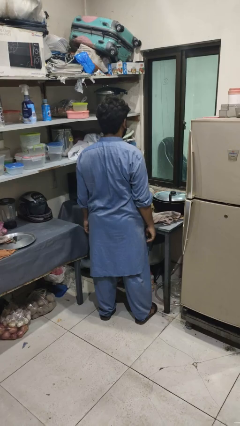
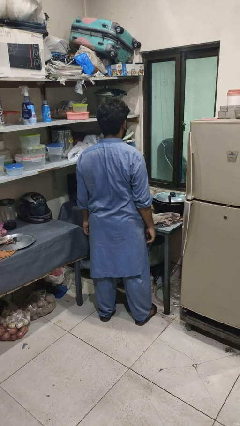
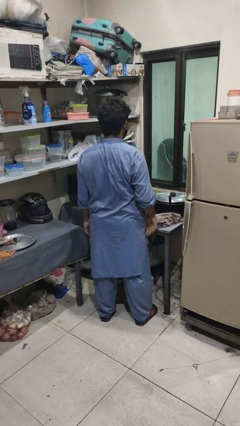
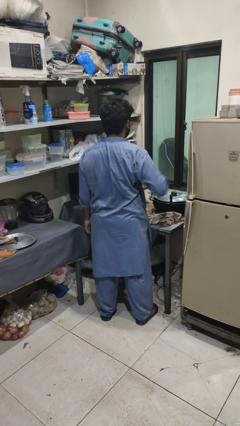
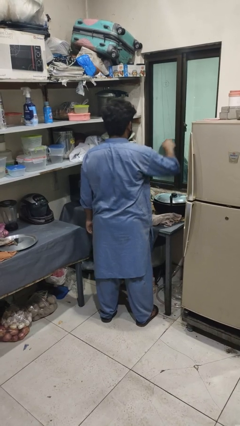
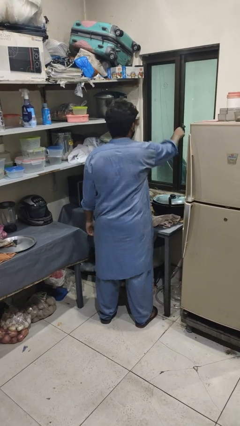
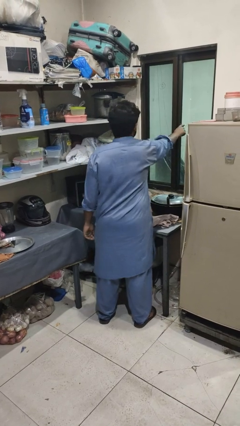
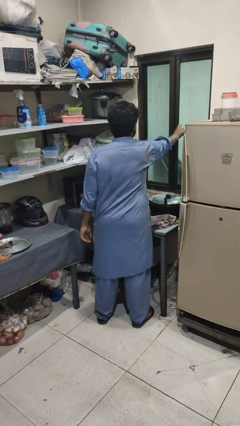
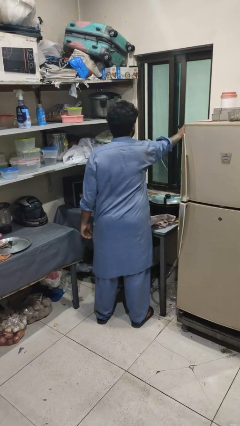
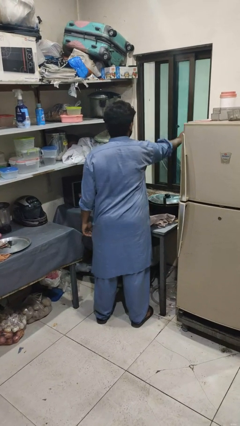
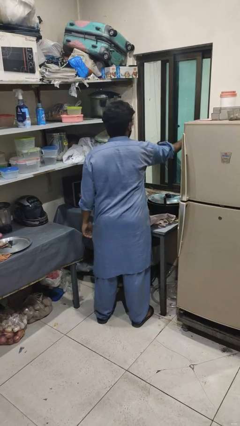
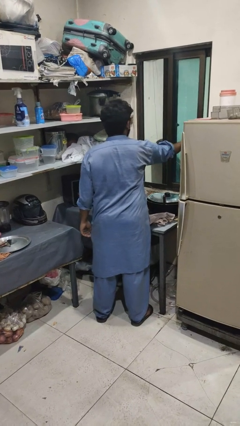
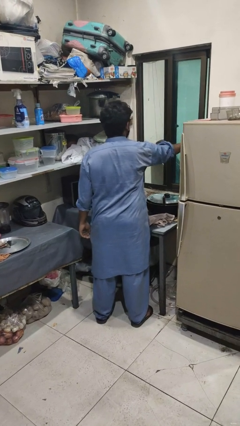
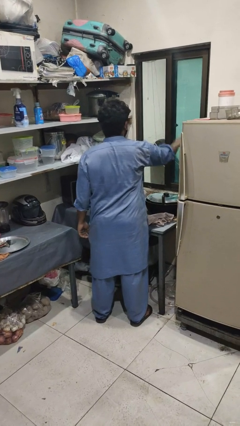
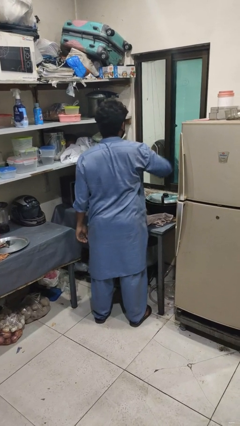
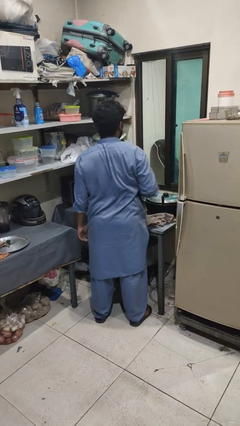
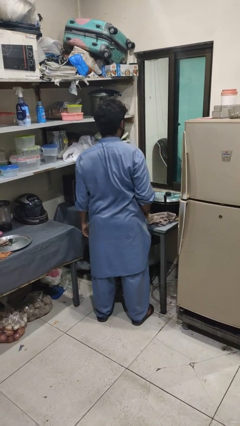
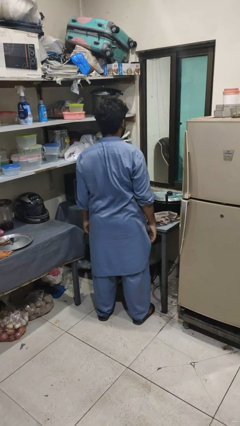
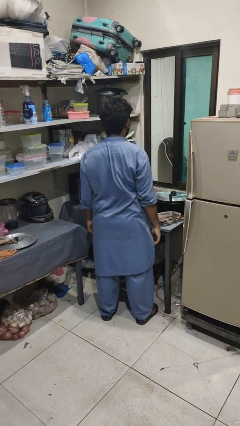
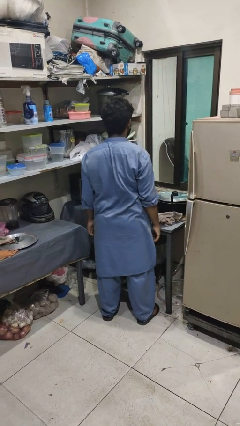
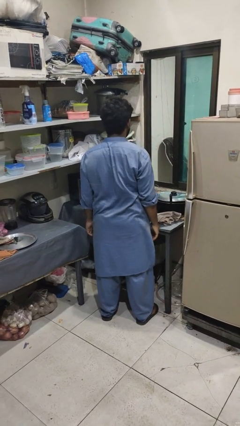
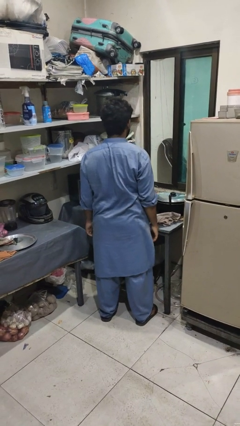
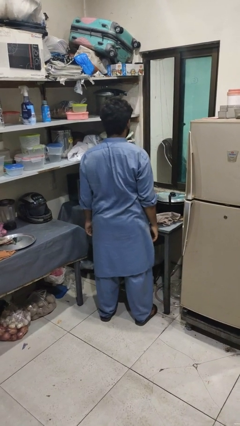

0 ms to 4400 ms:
person opens home window

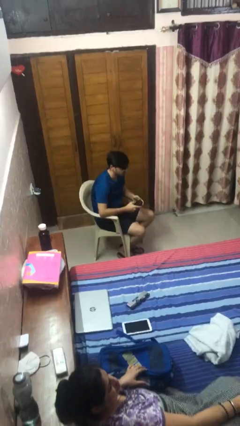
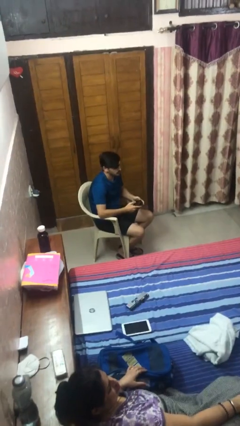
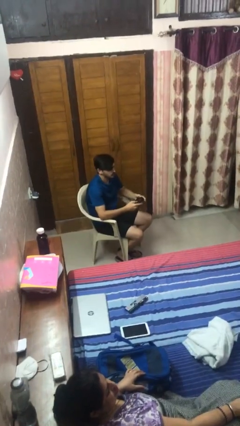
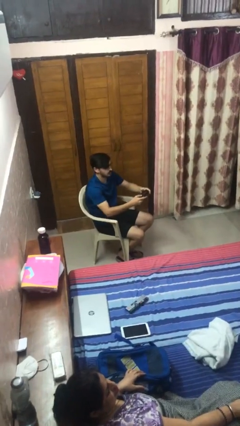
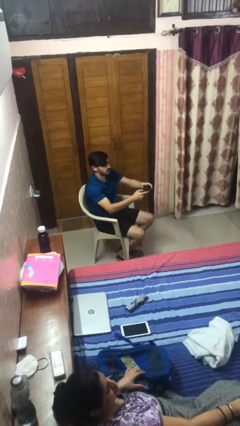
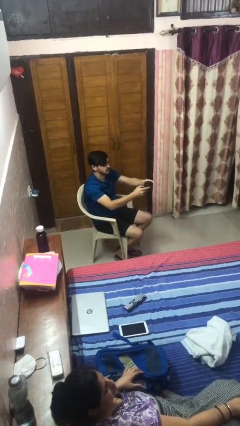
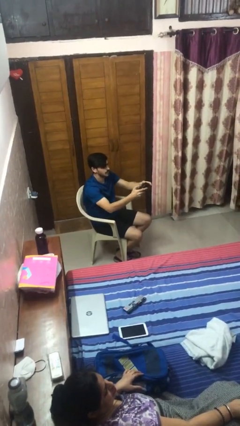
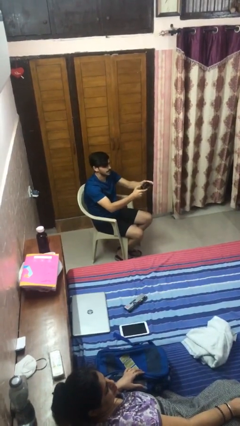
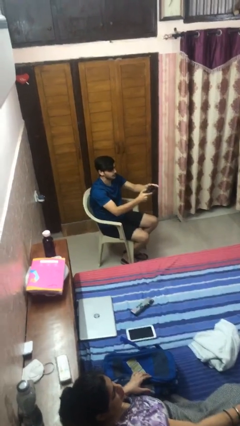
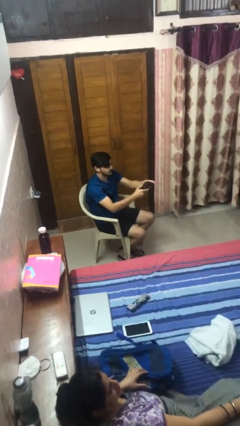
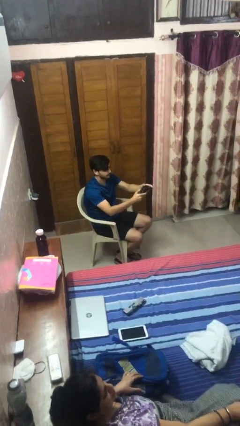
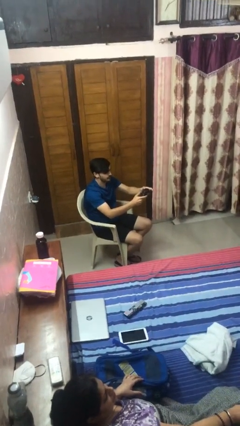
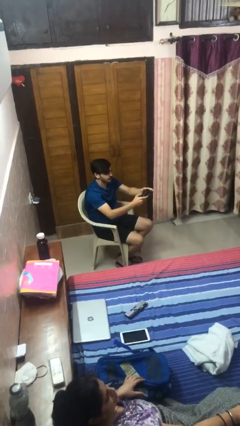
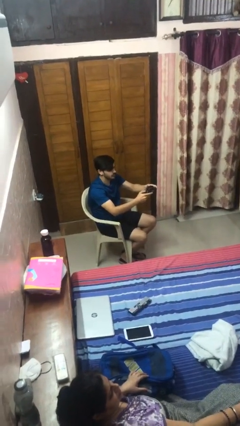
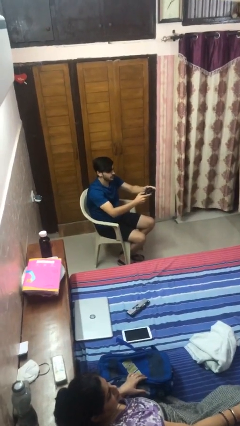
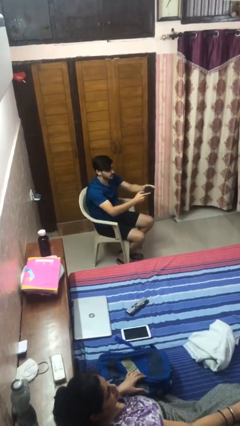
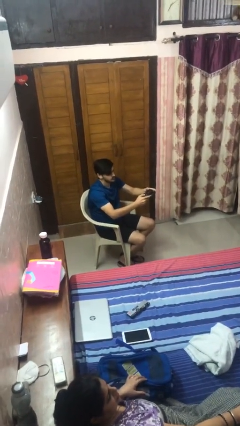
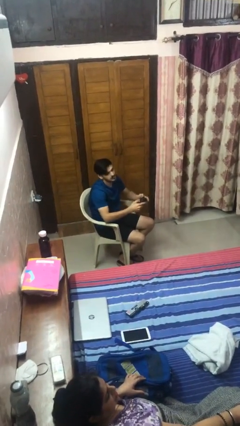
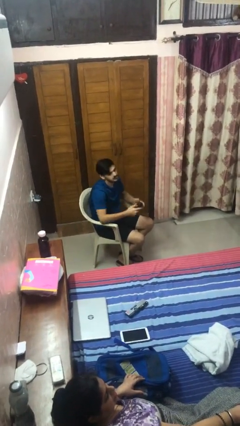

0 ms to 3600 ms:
person interacts with handheld game

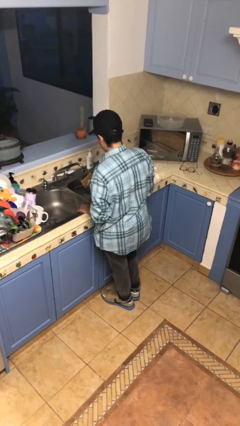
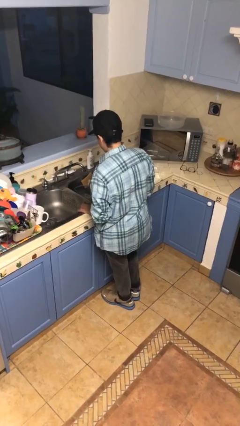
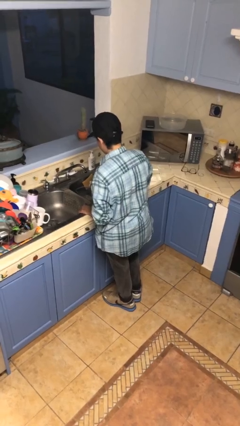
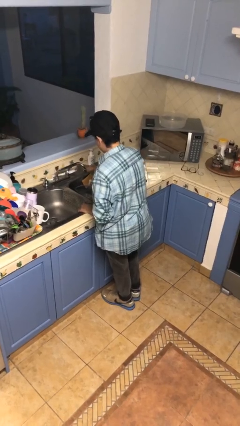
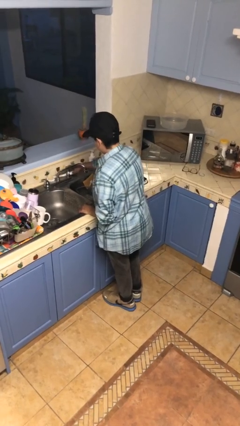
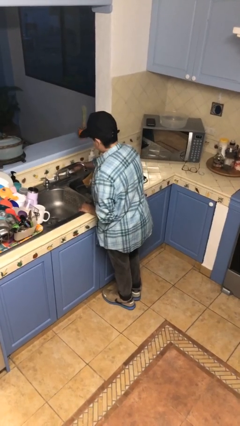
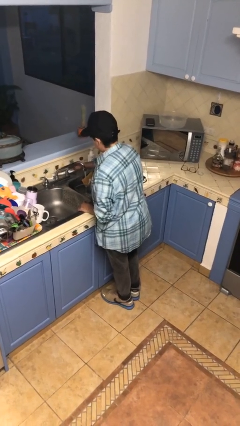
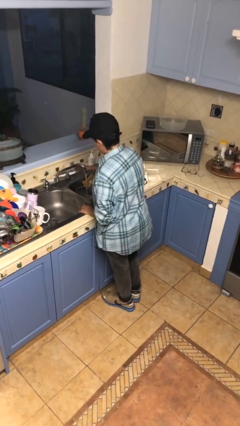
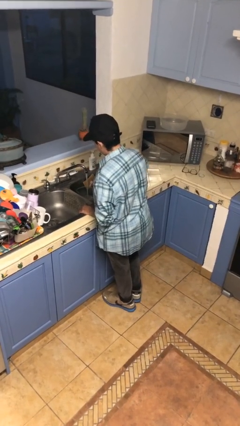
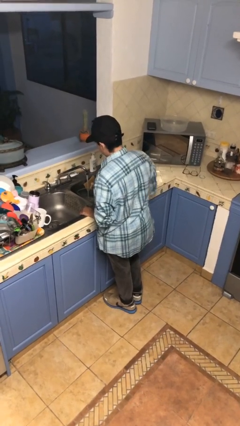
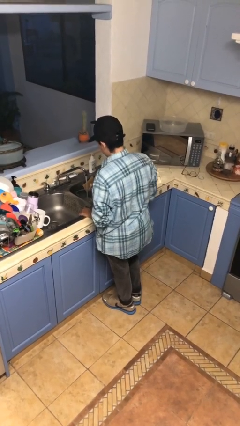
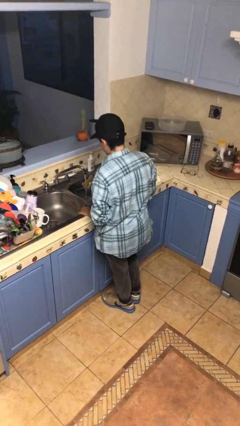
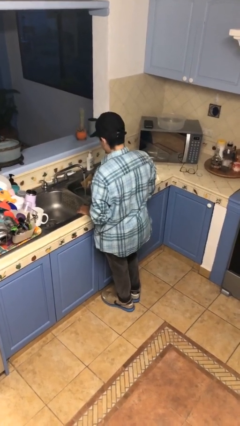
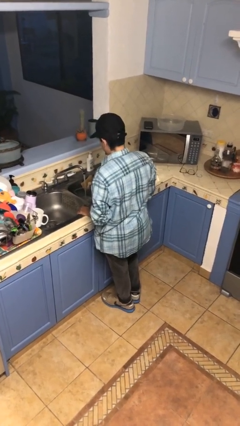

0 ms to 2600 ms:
person turns on faucet

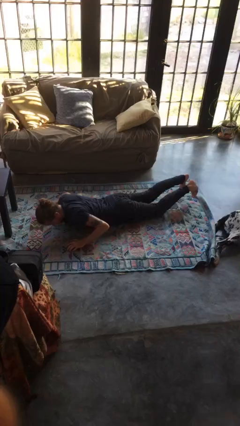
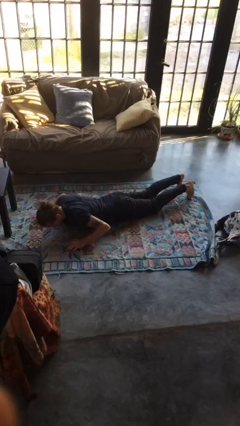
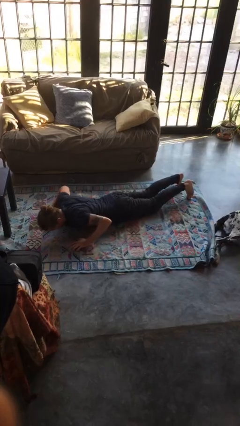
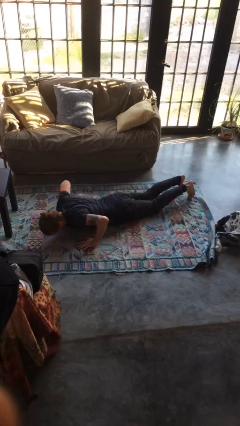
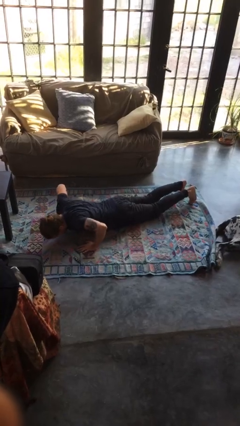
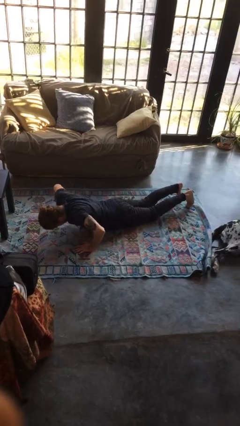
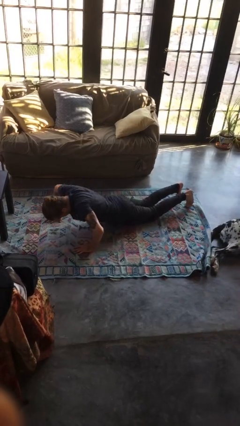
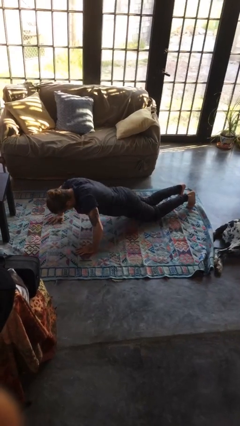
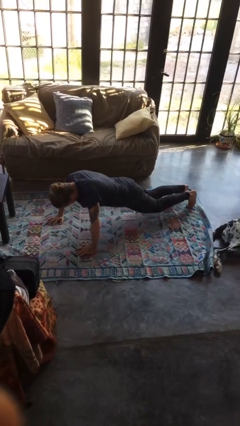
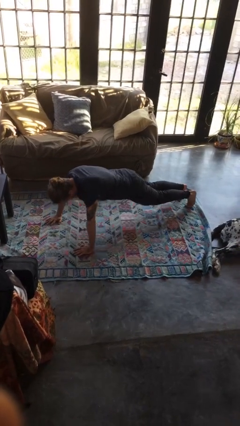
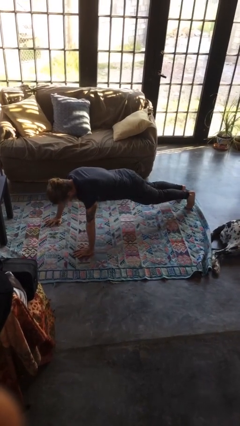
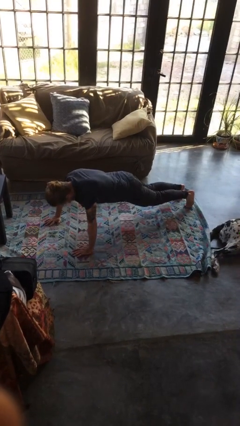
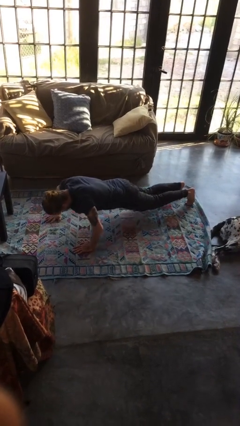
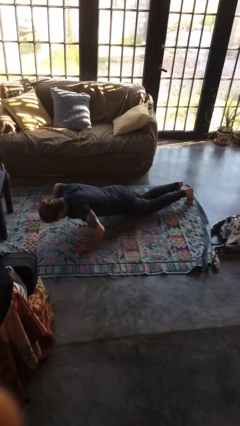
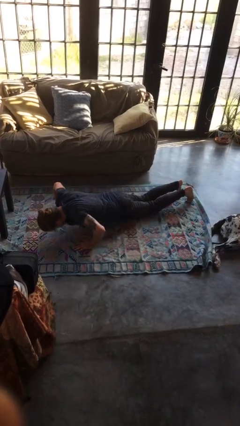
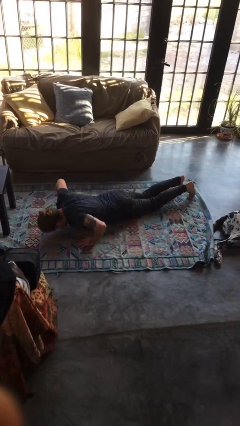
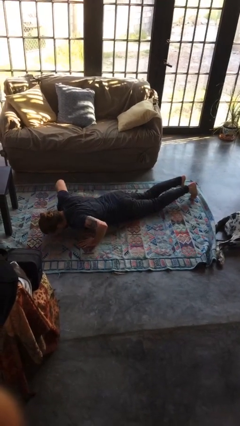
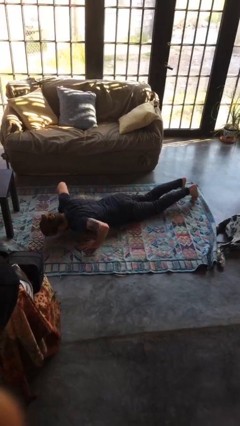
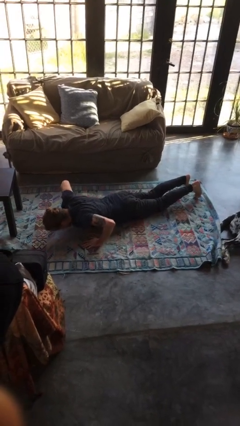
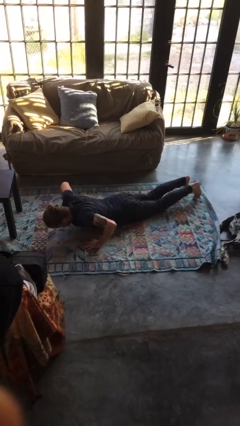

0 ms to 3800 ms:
person exercises with pushup

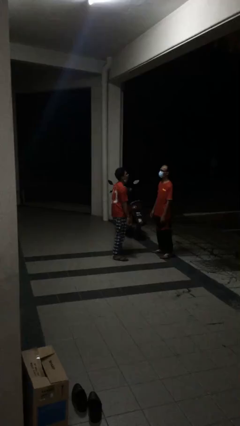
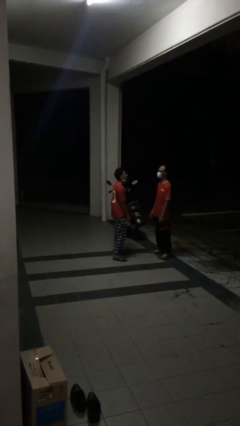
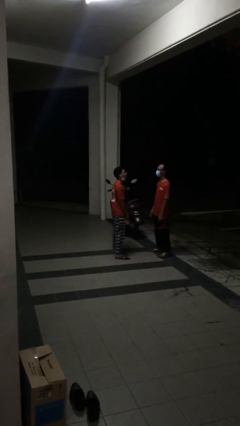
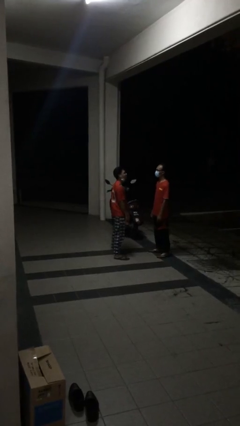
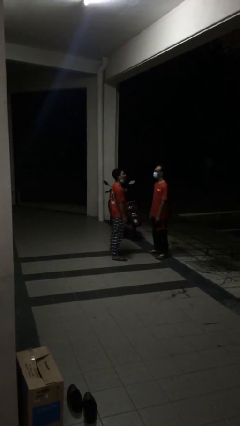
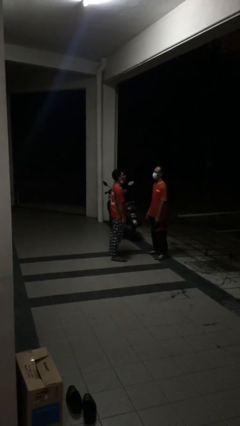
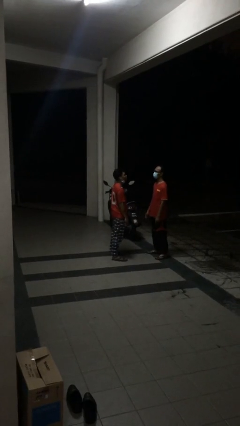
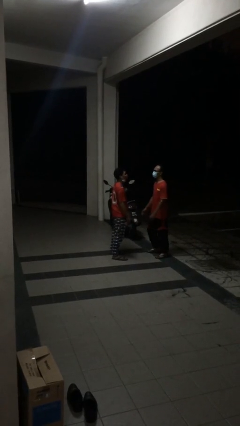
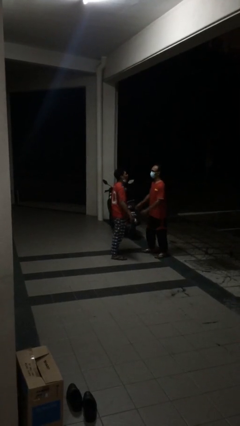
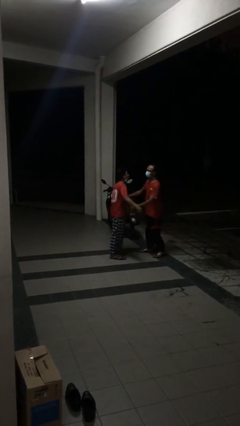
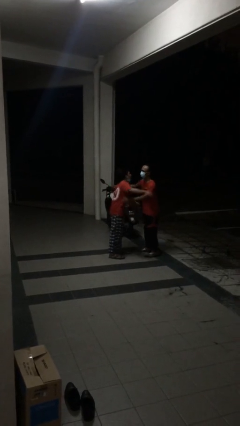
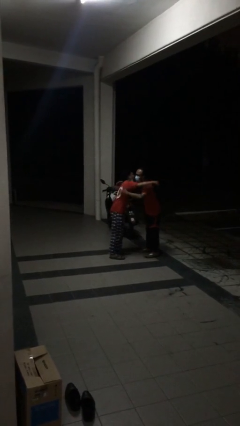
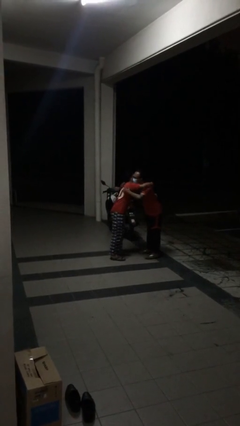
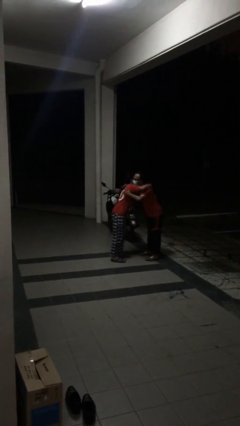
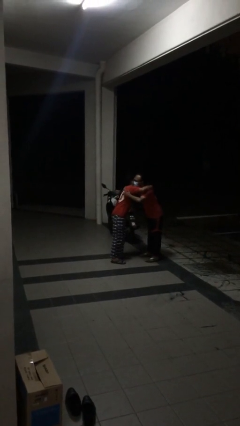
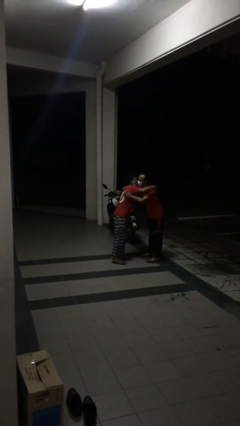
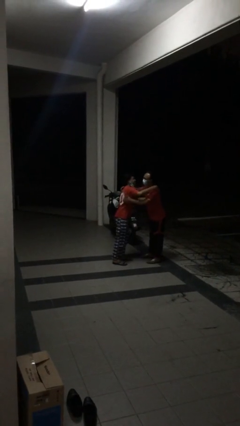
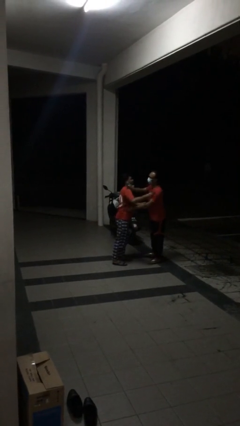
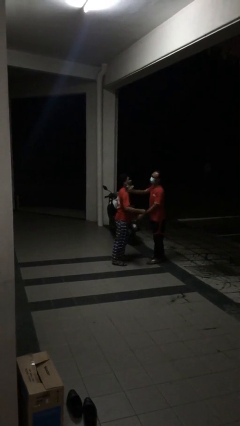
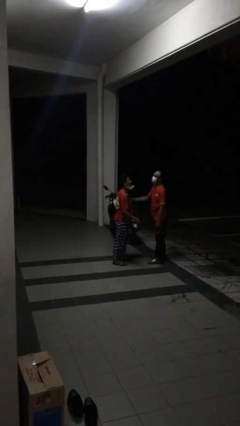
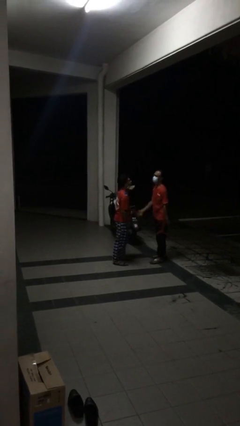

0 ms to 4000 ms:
person embraces person
